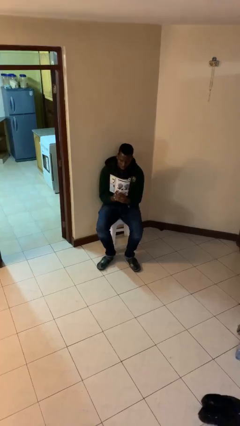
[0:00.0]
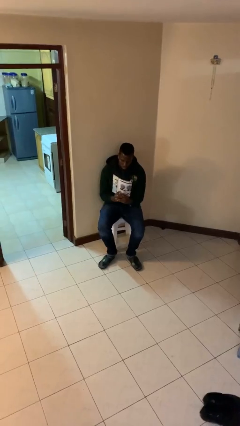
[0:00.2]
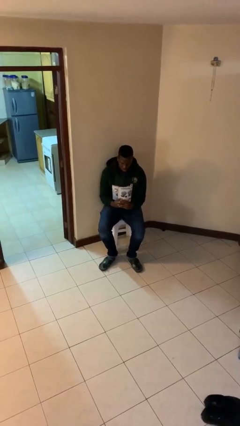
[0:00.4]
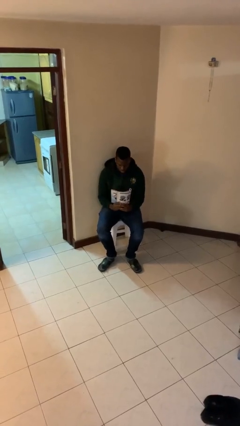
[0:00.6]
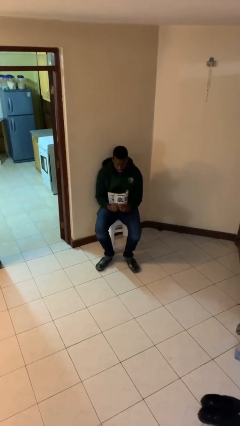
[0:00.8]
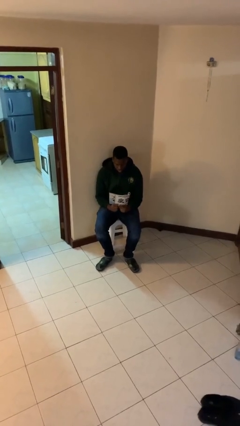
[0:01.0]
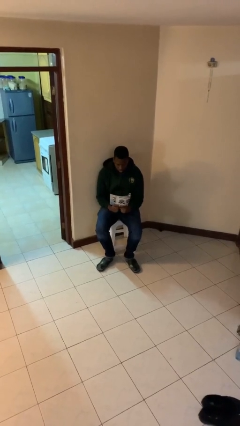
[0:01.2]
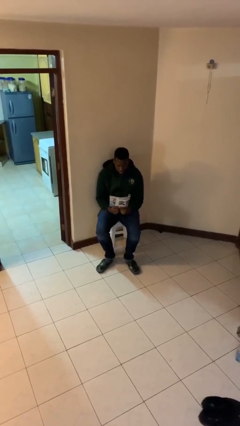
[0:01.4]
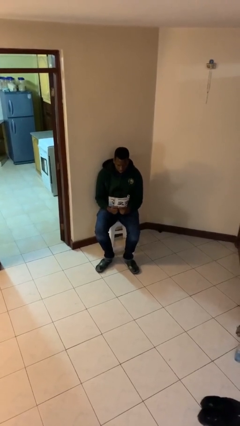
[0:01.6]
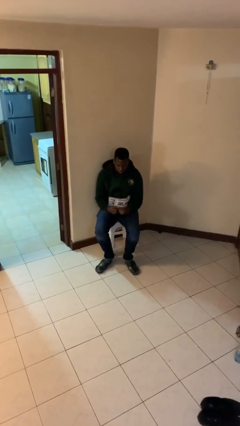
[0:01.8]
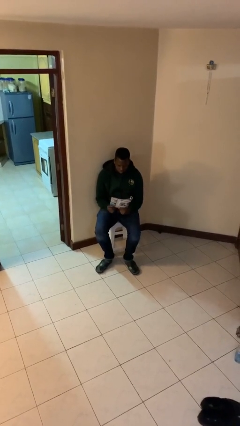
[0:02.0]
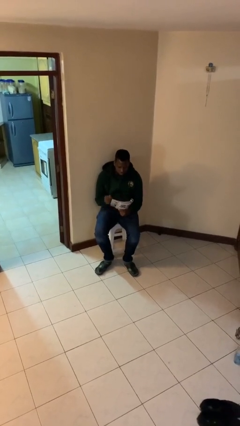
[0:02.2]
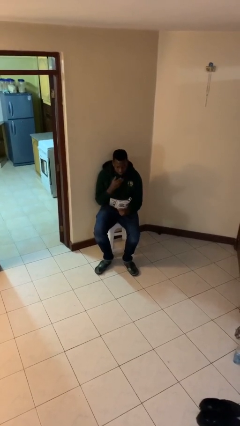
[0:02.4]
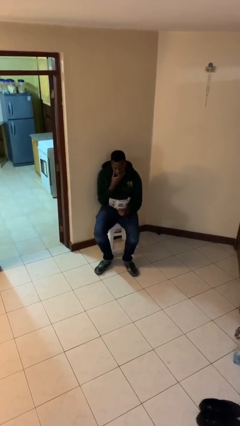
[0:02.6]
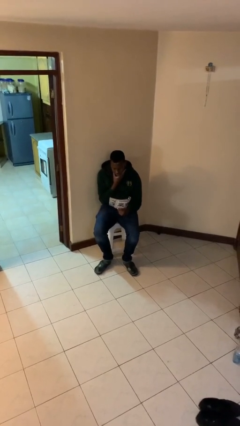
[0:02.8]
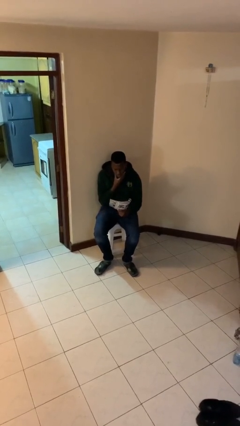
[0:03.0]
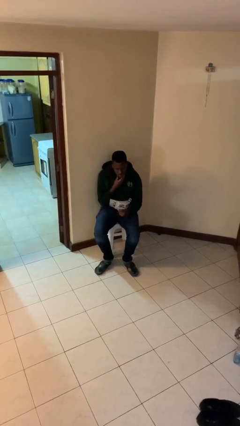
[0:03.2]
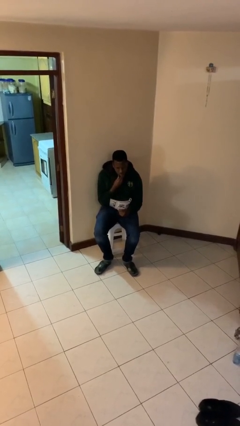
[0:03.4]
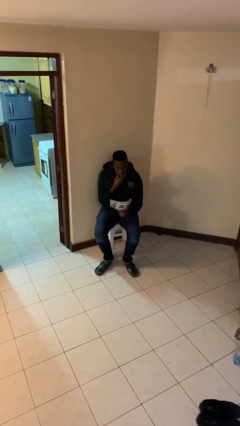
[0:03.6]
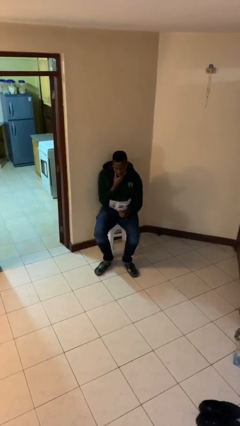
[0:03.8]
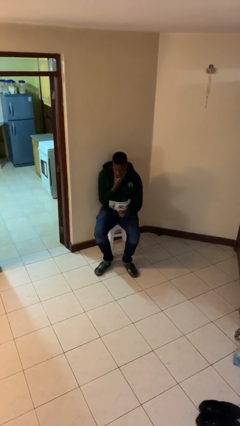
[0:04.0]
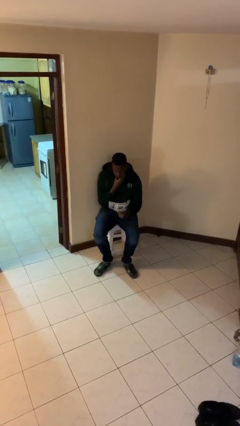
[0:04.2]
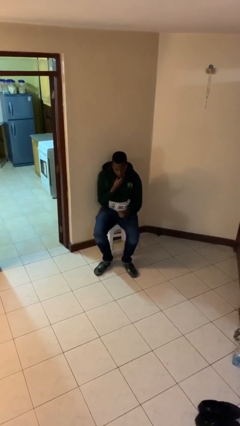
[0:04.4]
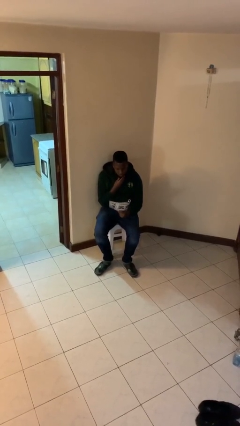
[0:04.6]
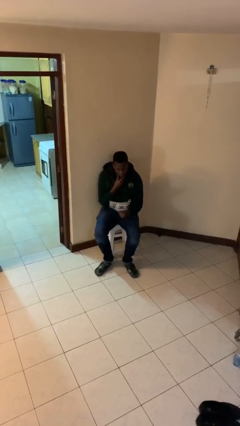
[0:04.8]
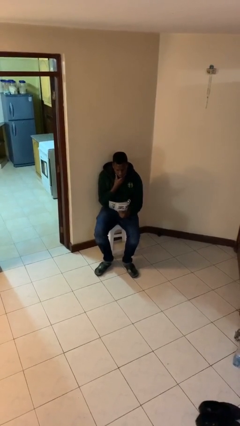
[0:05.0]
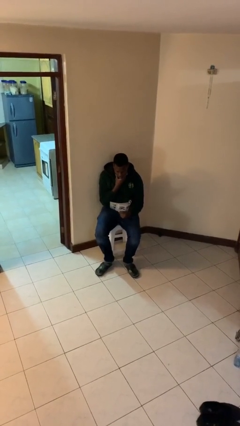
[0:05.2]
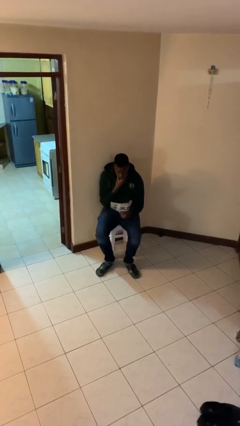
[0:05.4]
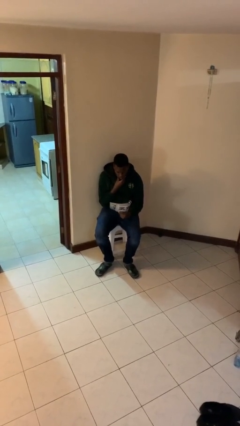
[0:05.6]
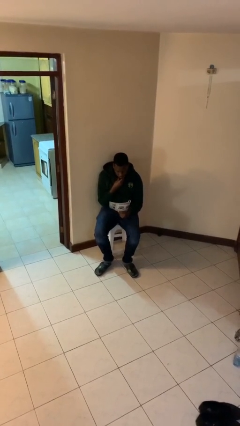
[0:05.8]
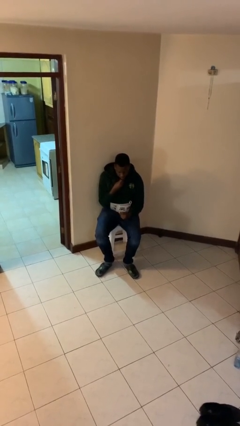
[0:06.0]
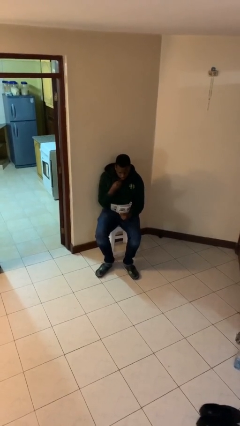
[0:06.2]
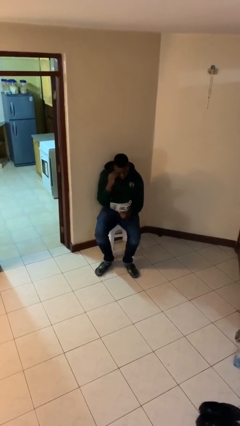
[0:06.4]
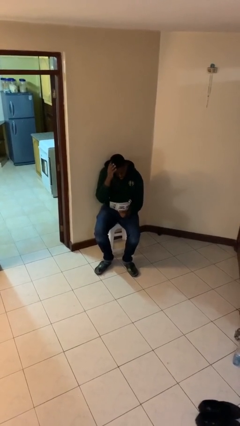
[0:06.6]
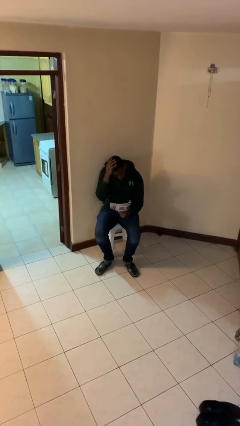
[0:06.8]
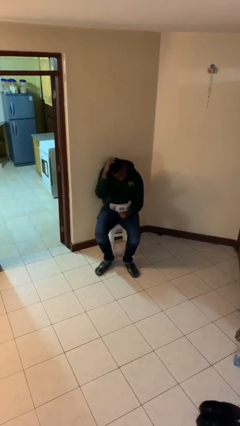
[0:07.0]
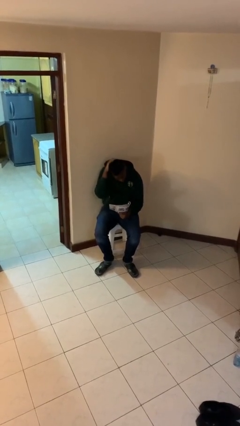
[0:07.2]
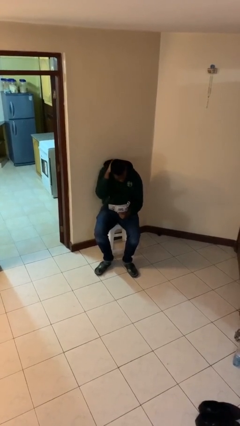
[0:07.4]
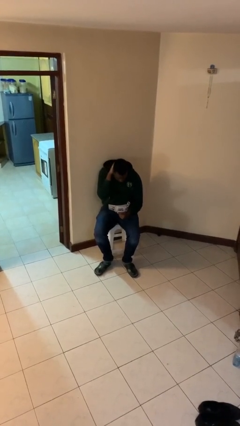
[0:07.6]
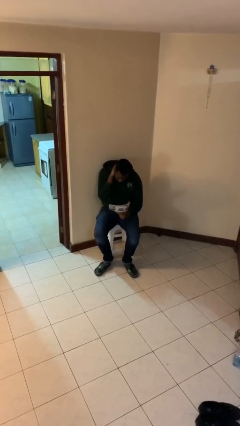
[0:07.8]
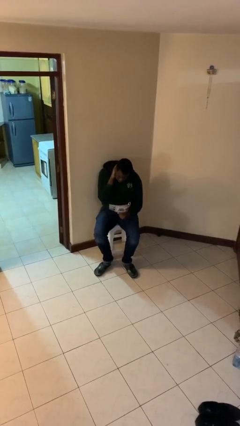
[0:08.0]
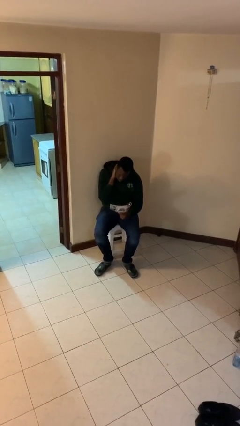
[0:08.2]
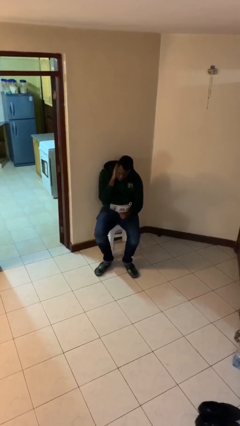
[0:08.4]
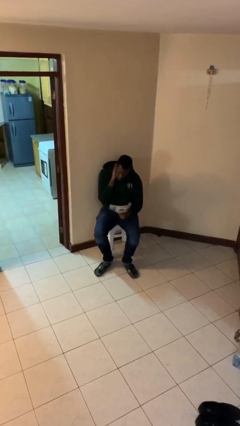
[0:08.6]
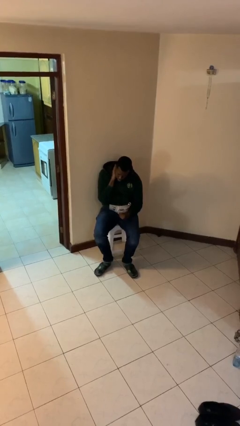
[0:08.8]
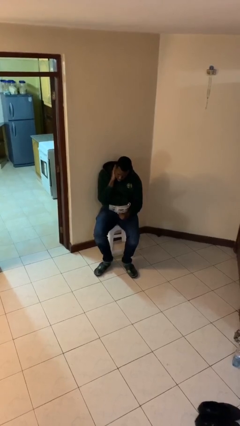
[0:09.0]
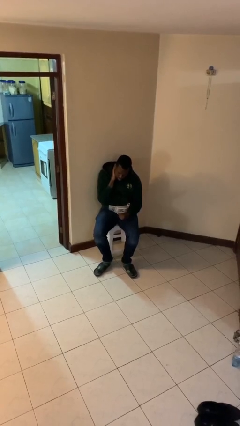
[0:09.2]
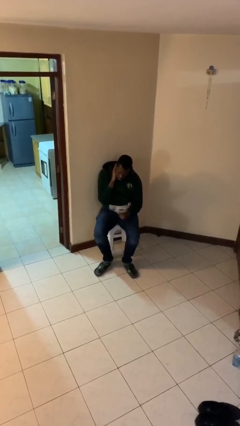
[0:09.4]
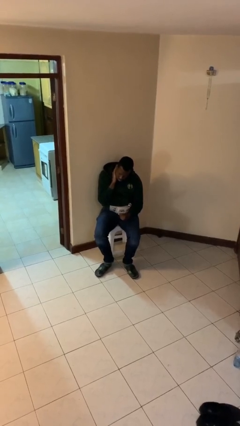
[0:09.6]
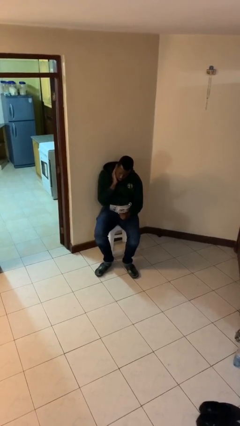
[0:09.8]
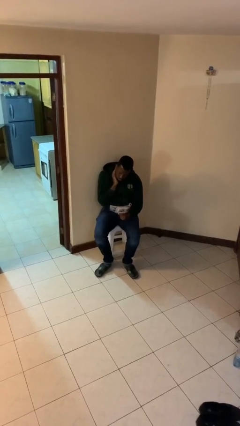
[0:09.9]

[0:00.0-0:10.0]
person reads document

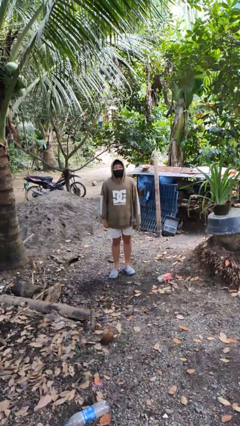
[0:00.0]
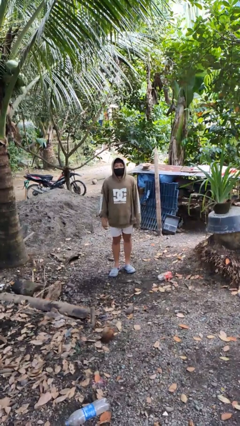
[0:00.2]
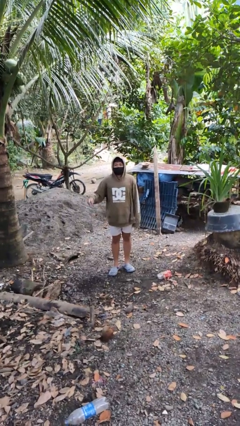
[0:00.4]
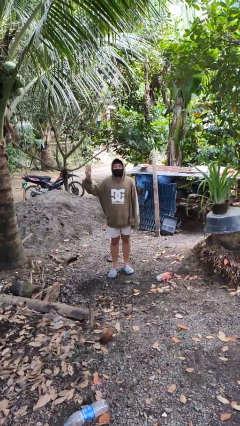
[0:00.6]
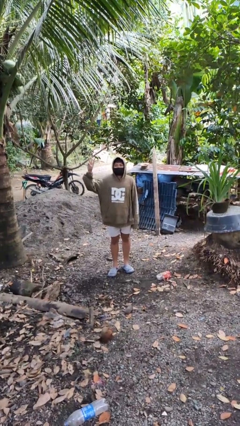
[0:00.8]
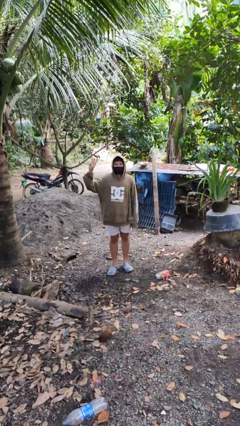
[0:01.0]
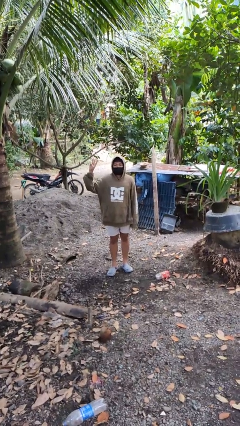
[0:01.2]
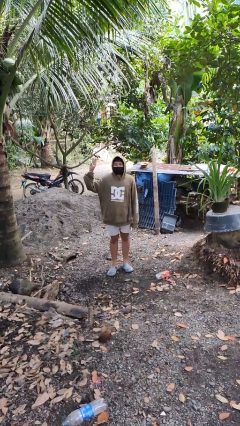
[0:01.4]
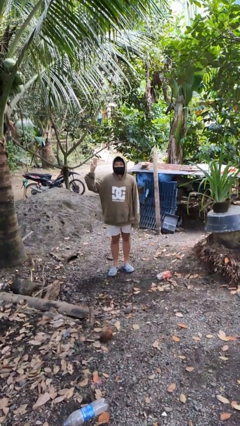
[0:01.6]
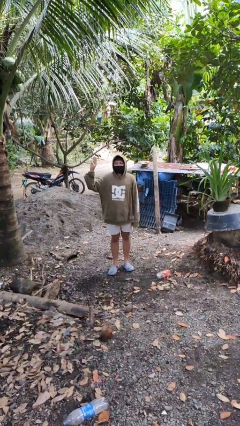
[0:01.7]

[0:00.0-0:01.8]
person gestures number three

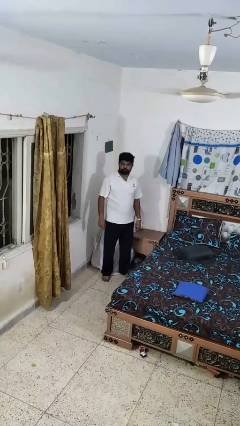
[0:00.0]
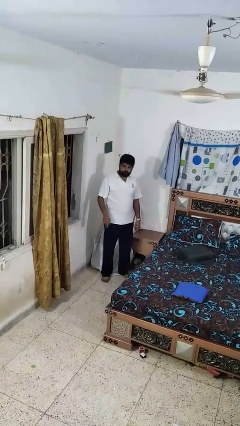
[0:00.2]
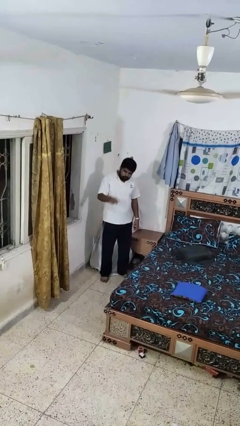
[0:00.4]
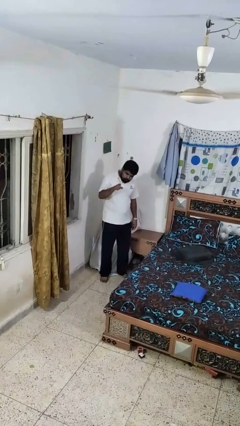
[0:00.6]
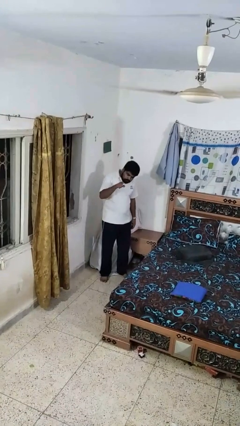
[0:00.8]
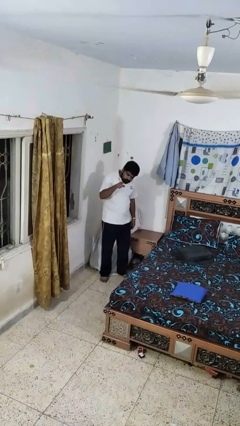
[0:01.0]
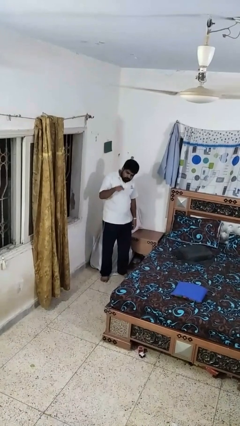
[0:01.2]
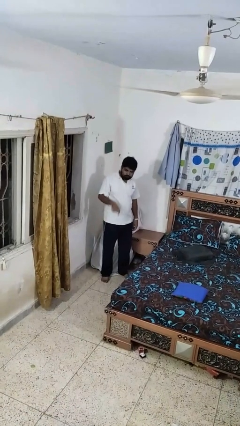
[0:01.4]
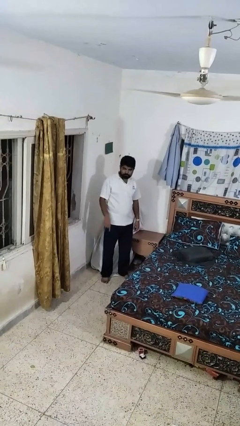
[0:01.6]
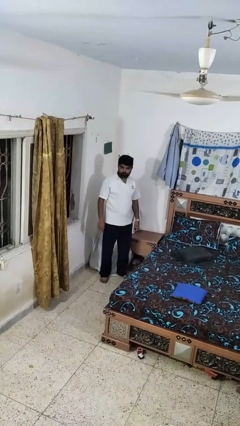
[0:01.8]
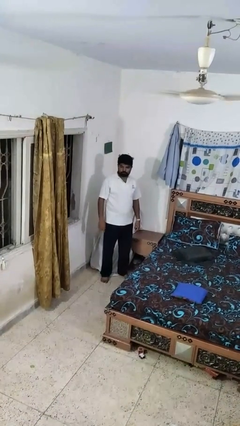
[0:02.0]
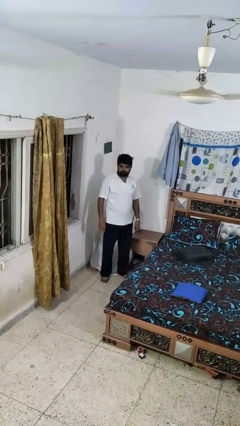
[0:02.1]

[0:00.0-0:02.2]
person points at person

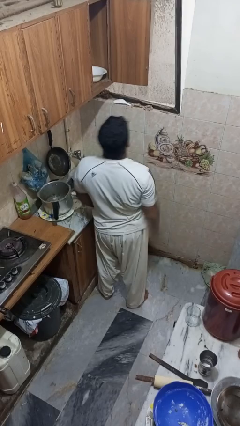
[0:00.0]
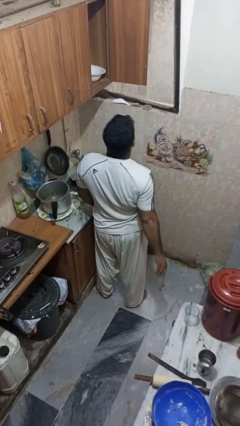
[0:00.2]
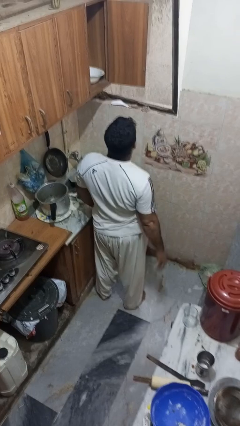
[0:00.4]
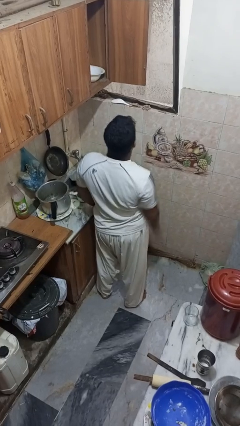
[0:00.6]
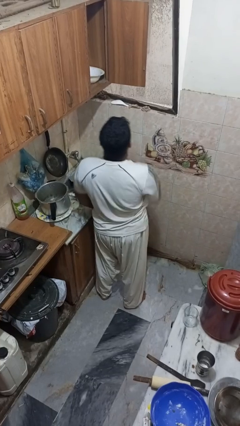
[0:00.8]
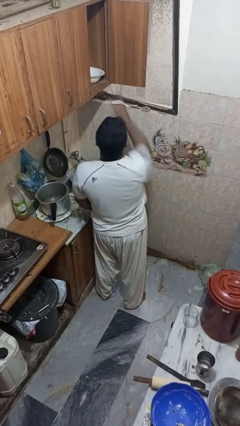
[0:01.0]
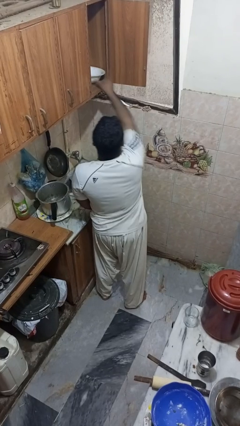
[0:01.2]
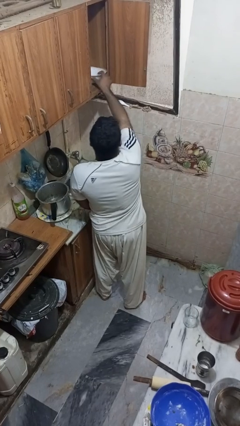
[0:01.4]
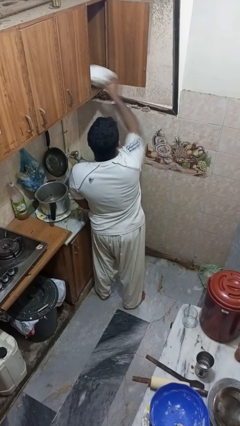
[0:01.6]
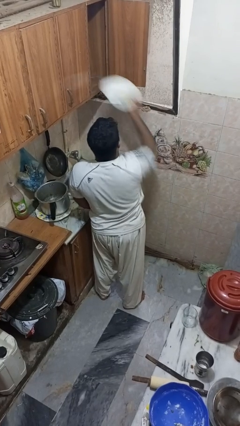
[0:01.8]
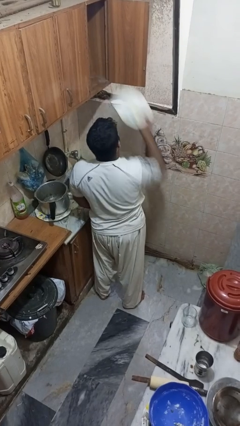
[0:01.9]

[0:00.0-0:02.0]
person takes object from cabinet

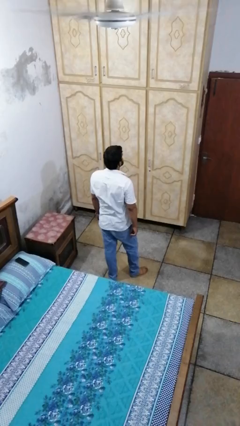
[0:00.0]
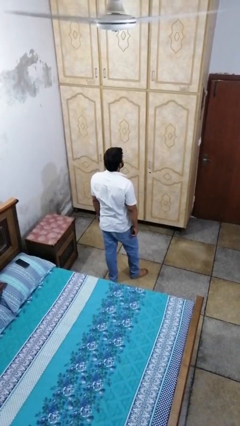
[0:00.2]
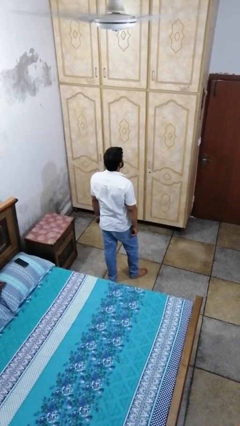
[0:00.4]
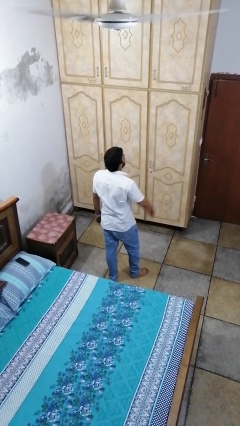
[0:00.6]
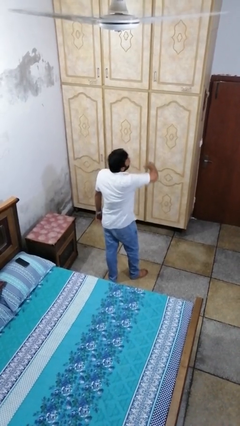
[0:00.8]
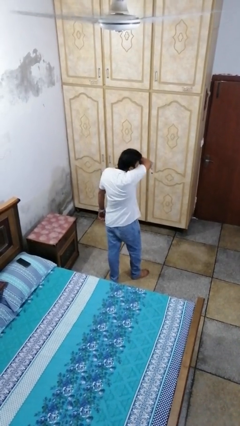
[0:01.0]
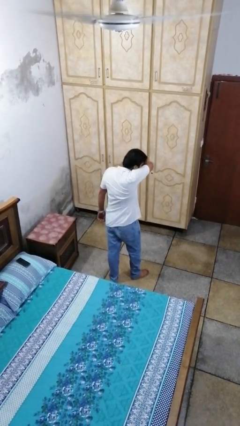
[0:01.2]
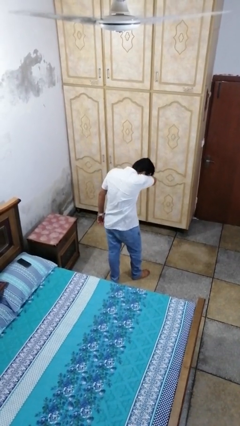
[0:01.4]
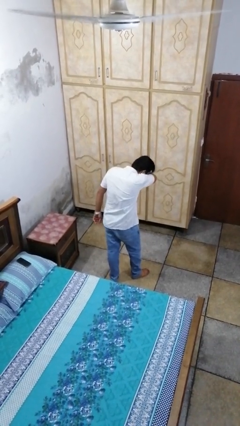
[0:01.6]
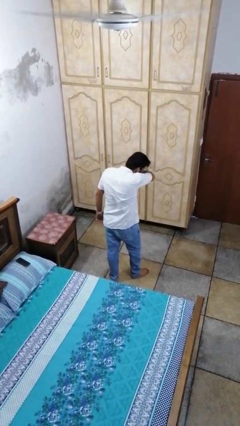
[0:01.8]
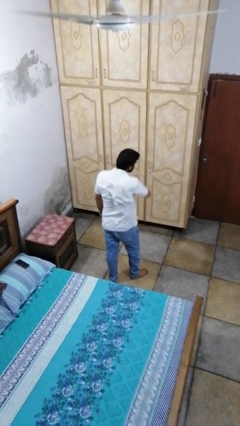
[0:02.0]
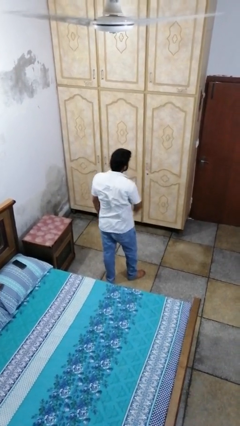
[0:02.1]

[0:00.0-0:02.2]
person sneezes into arm
